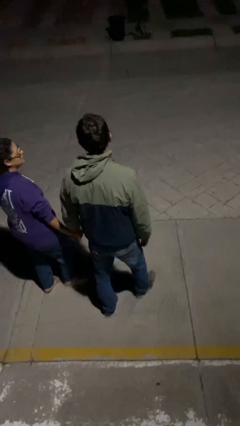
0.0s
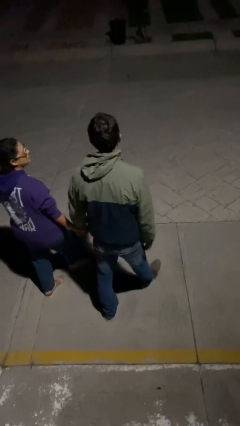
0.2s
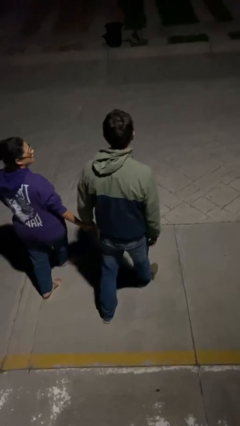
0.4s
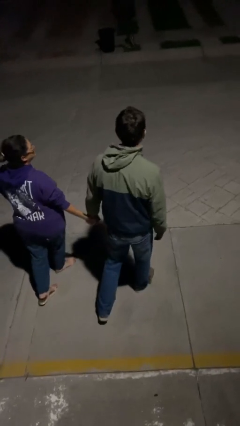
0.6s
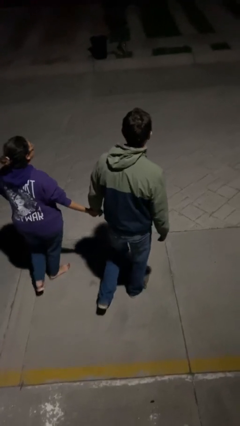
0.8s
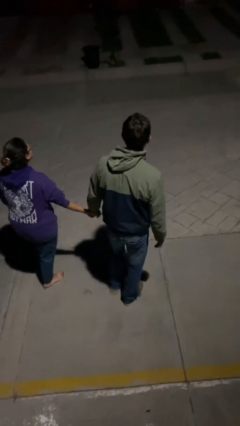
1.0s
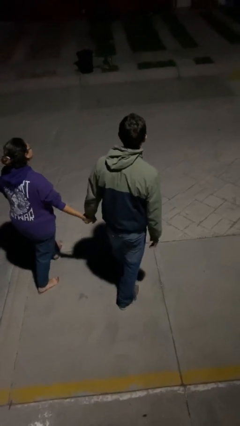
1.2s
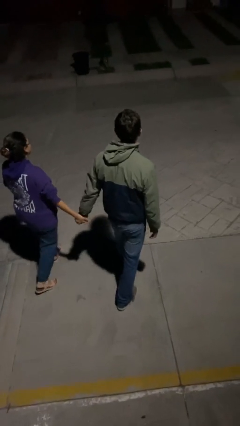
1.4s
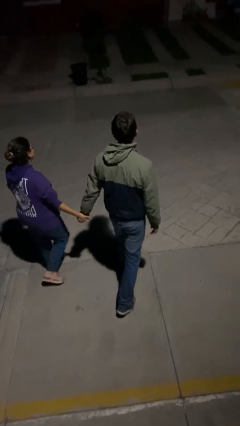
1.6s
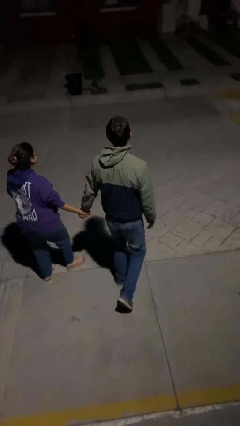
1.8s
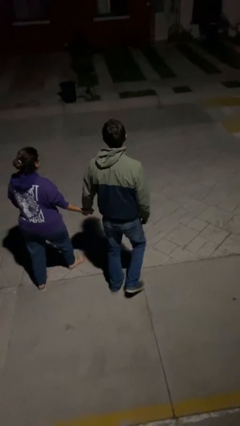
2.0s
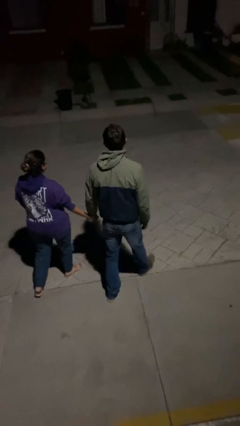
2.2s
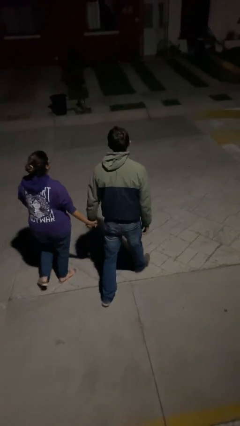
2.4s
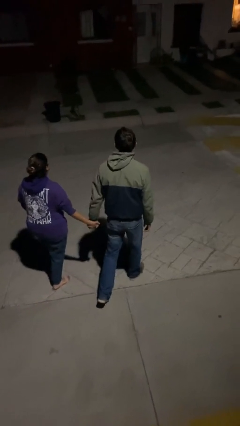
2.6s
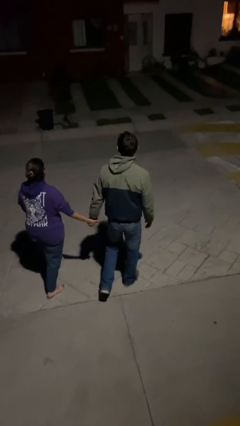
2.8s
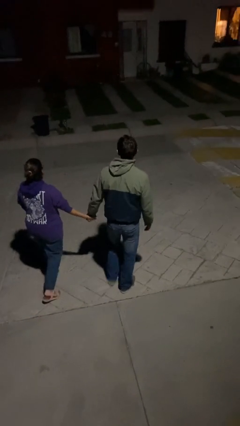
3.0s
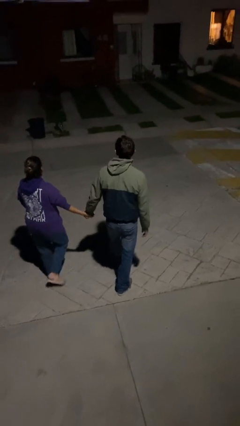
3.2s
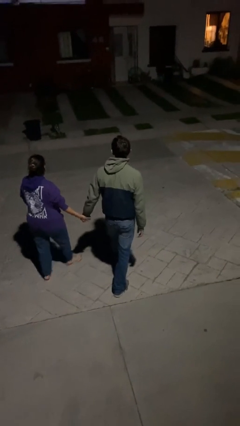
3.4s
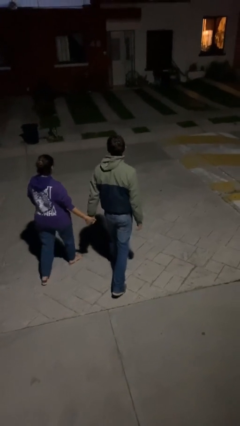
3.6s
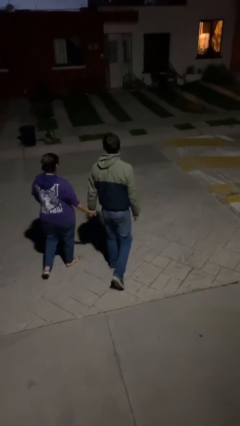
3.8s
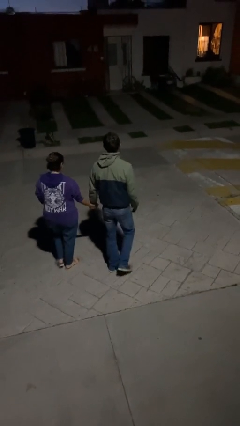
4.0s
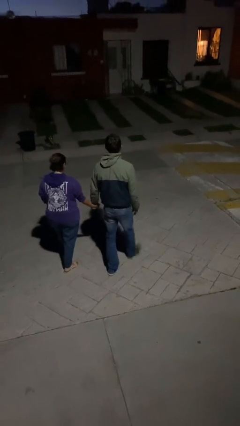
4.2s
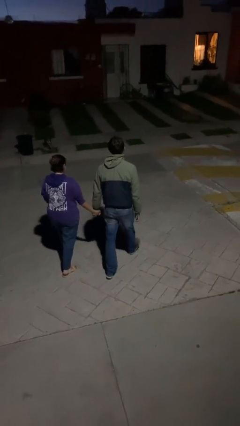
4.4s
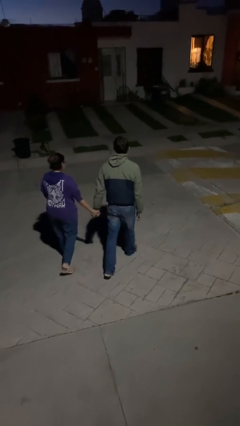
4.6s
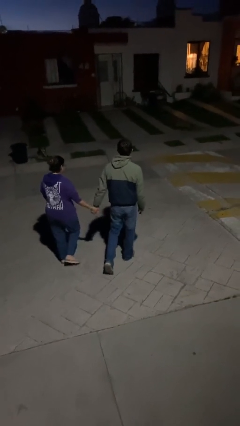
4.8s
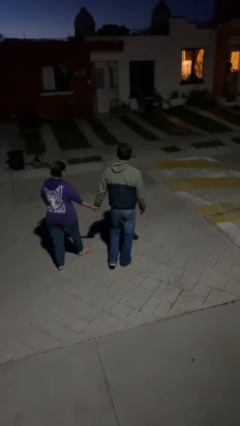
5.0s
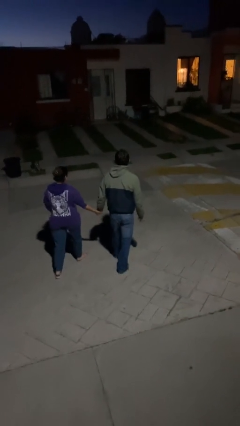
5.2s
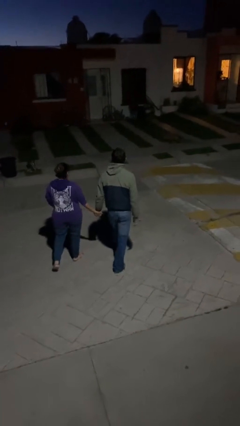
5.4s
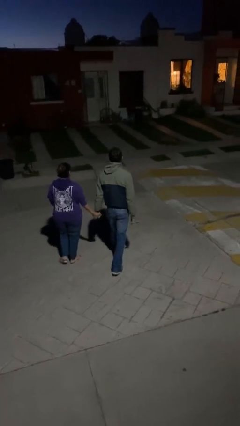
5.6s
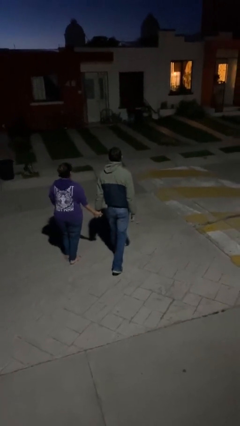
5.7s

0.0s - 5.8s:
person transfers object to person

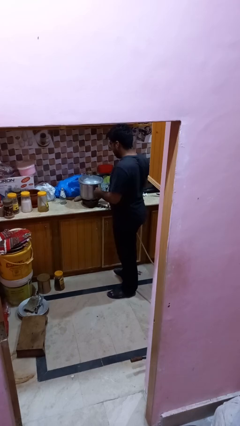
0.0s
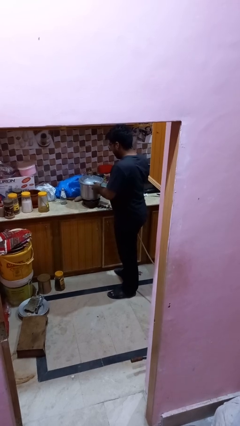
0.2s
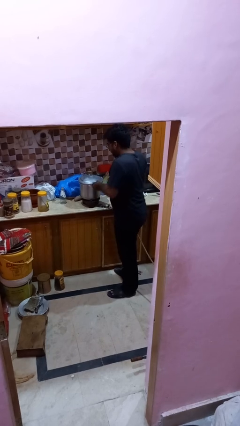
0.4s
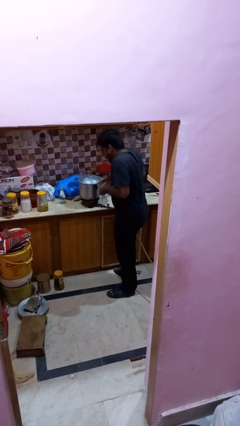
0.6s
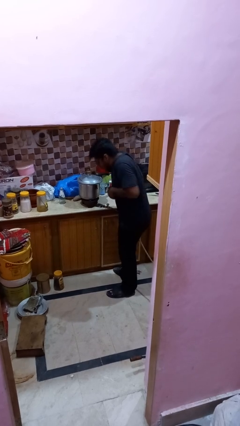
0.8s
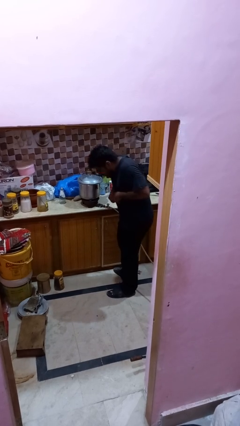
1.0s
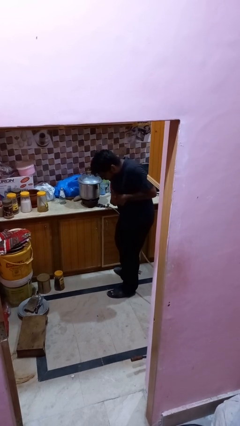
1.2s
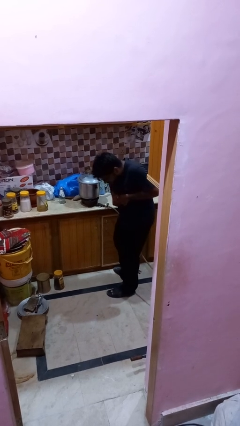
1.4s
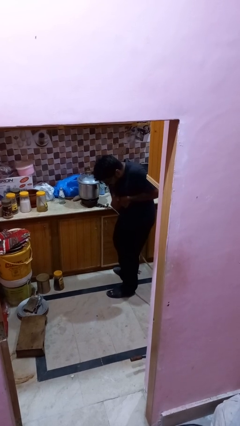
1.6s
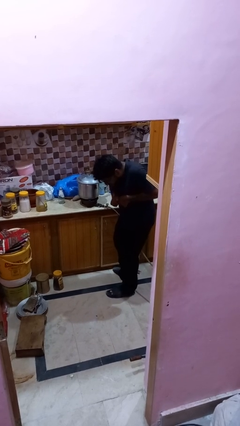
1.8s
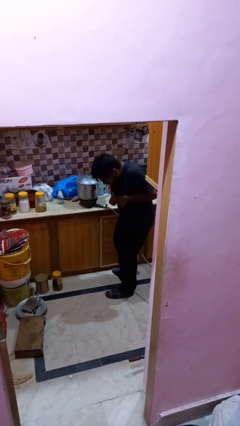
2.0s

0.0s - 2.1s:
person burns hand

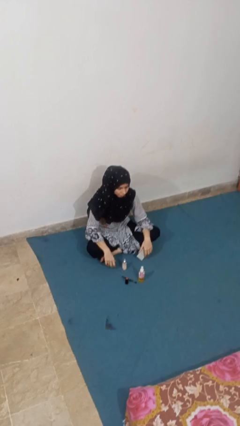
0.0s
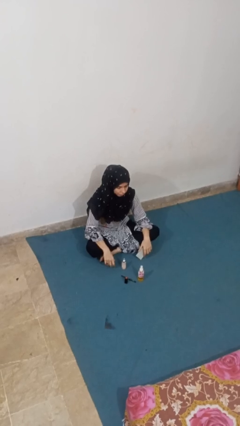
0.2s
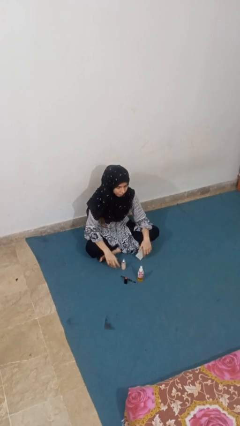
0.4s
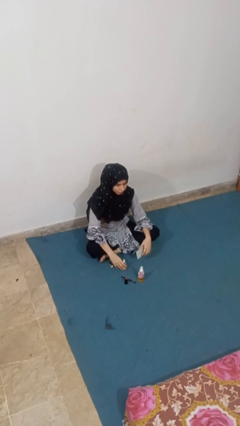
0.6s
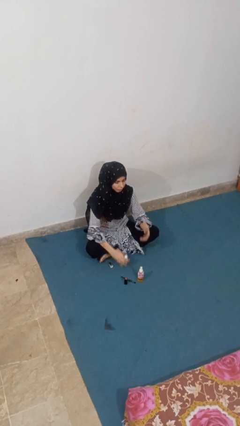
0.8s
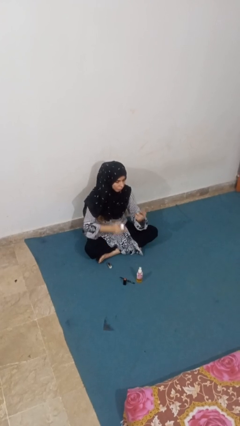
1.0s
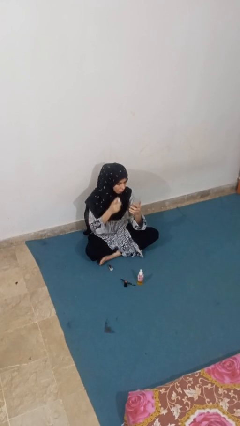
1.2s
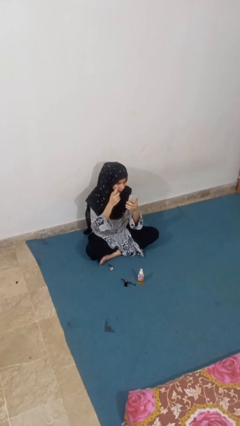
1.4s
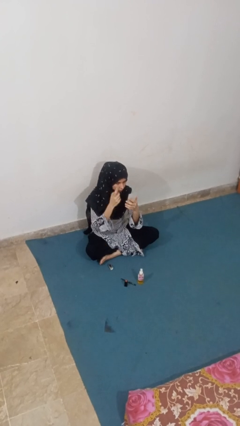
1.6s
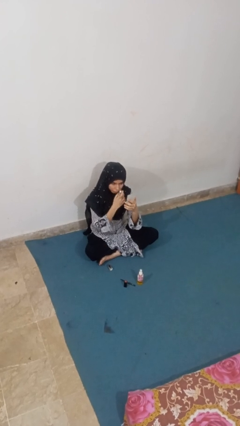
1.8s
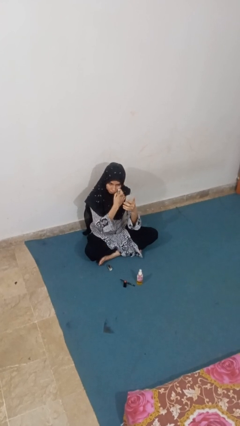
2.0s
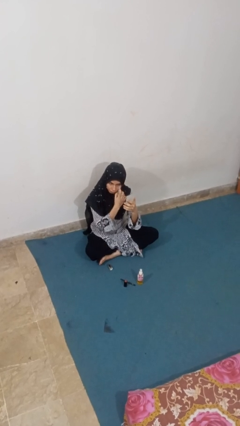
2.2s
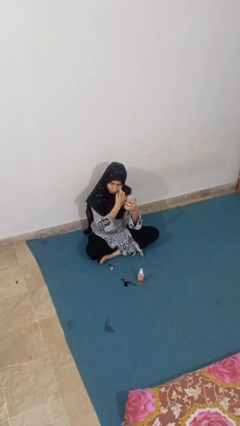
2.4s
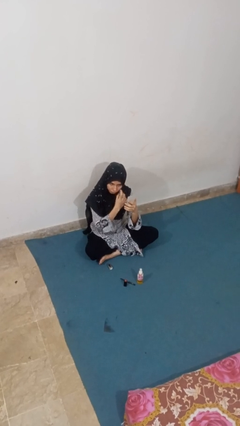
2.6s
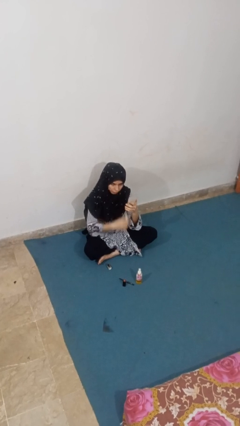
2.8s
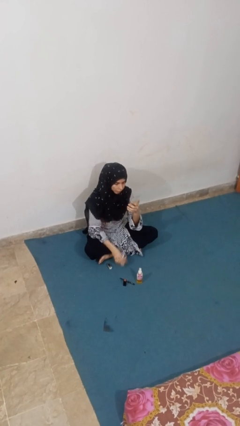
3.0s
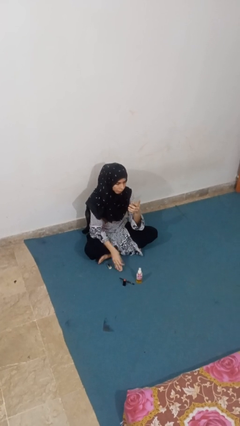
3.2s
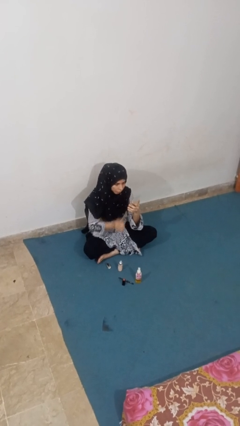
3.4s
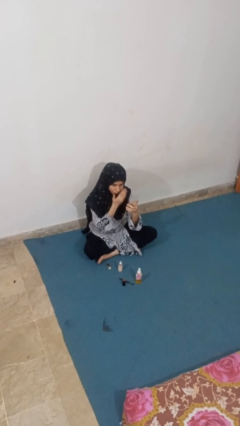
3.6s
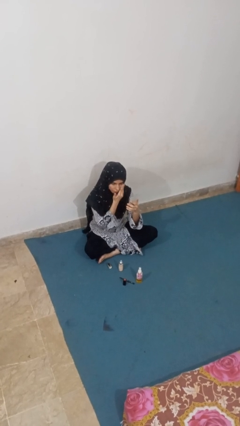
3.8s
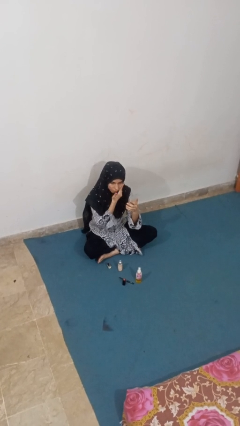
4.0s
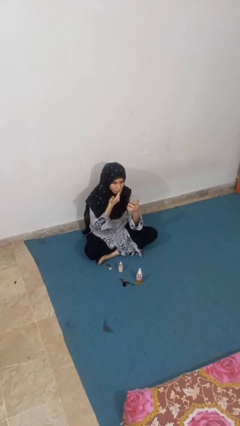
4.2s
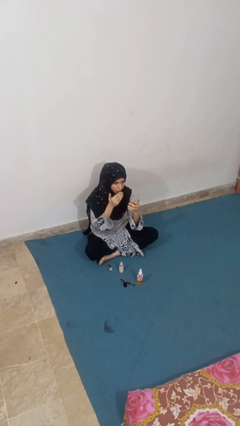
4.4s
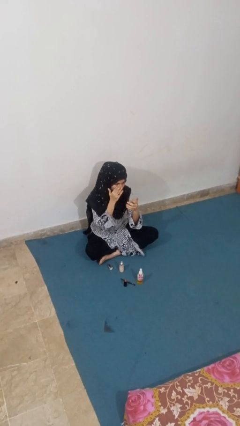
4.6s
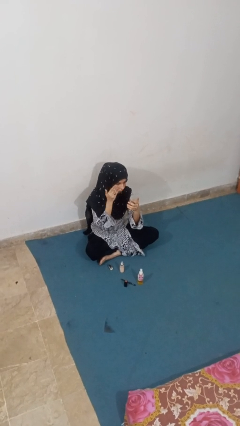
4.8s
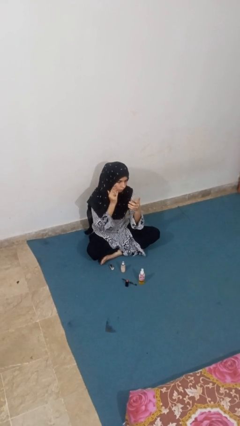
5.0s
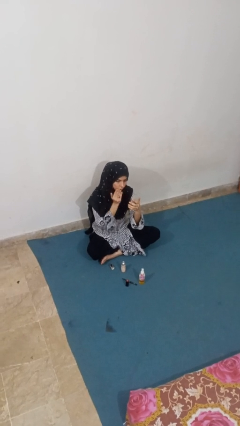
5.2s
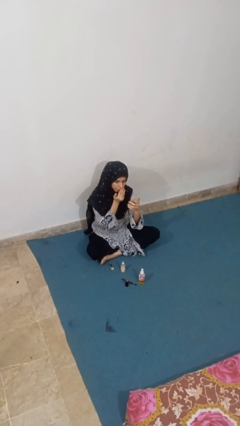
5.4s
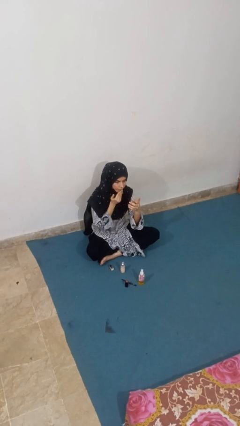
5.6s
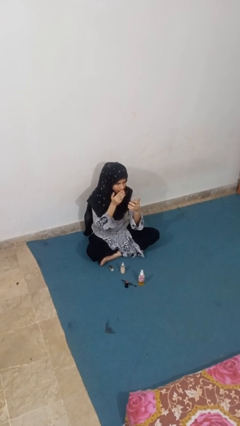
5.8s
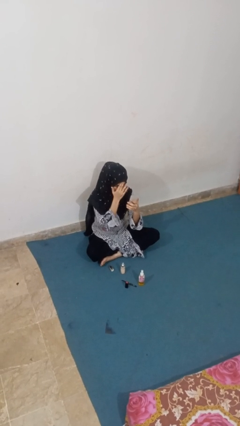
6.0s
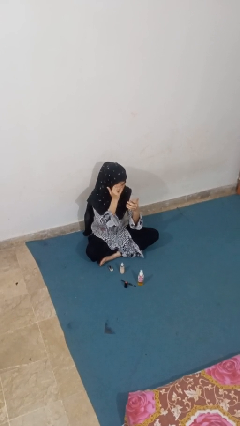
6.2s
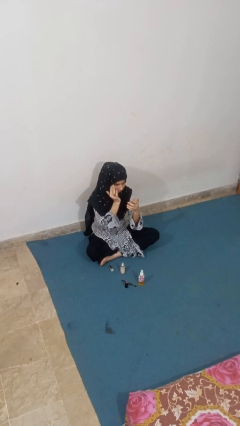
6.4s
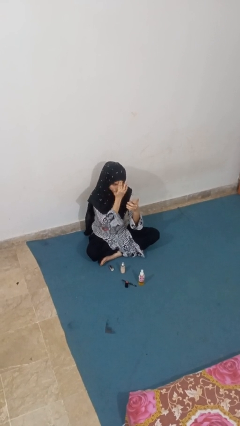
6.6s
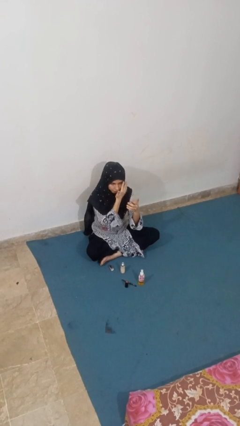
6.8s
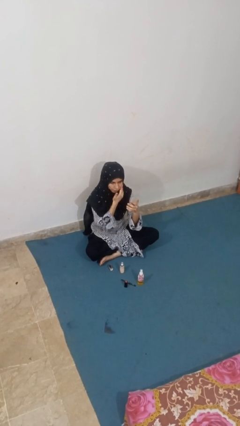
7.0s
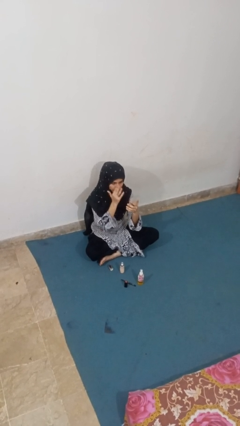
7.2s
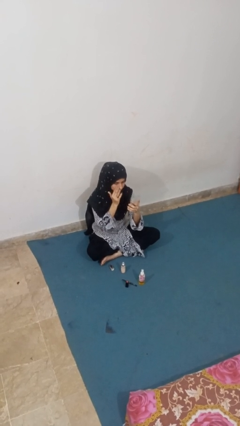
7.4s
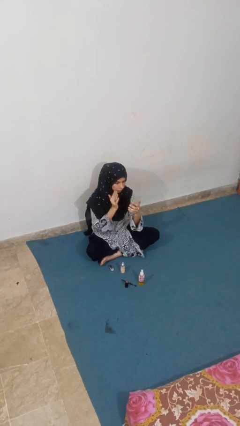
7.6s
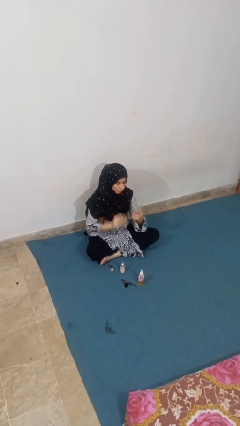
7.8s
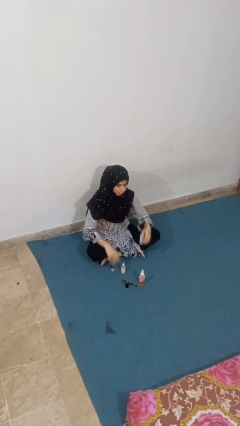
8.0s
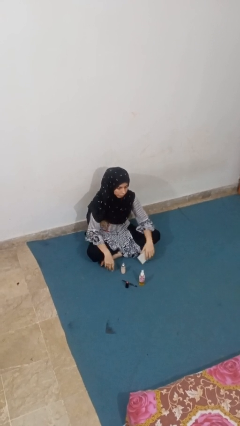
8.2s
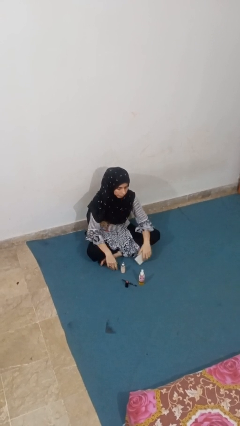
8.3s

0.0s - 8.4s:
person applies foundation makeup

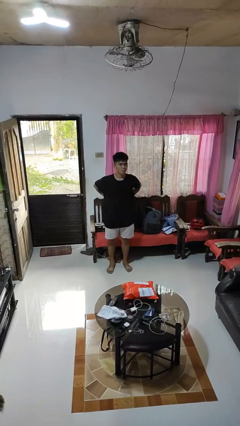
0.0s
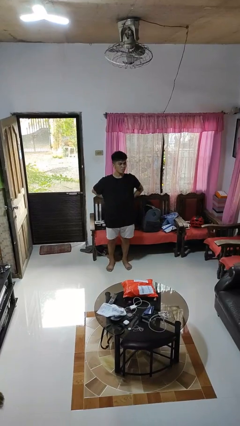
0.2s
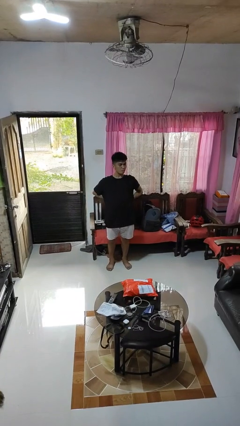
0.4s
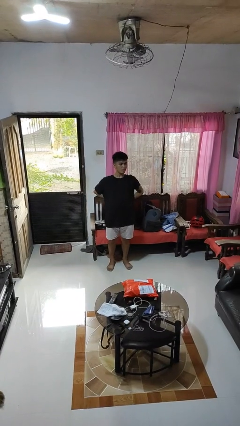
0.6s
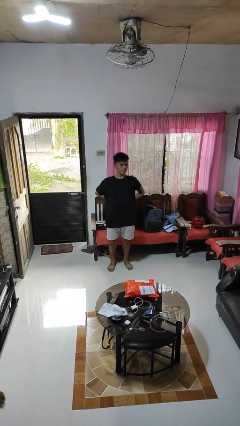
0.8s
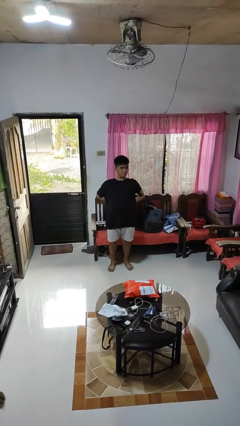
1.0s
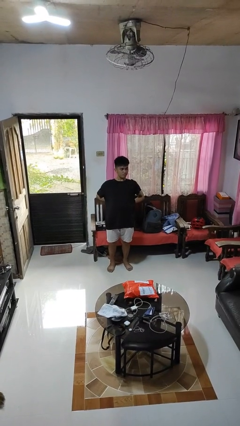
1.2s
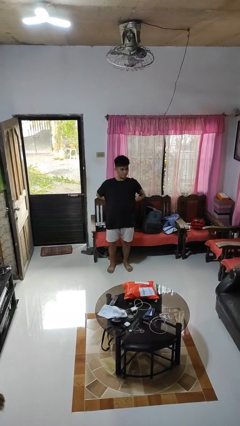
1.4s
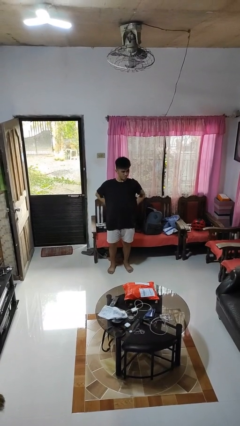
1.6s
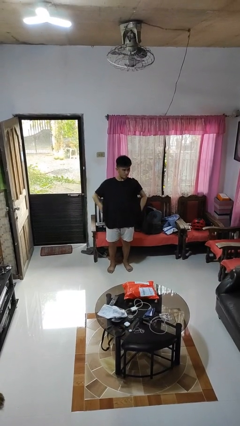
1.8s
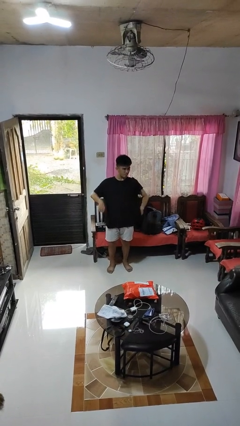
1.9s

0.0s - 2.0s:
person stretches back
